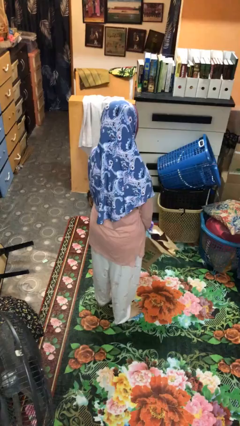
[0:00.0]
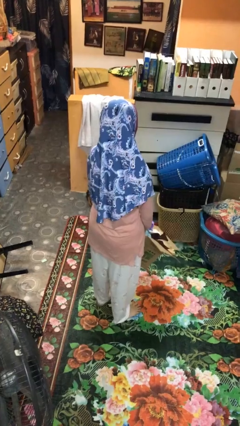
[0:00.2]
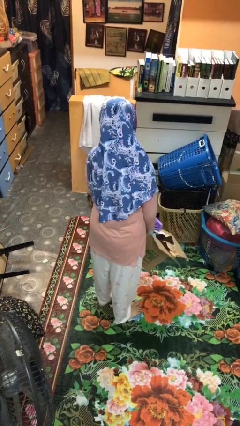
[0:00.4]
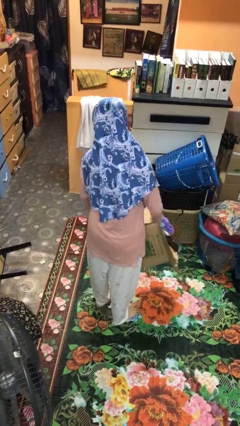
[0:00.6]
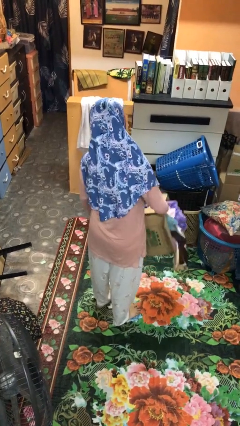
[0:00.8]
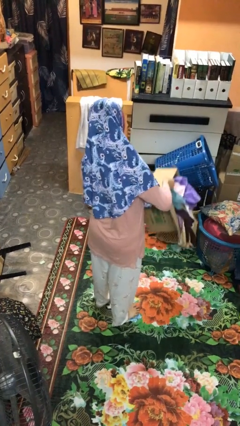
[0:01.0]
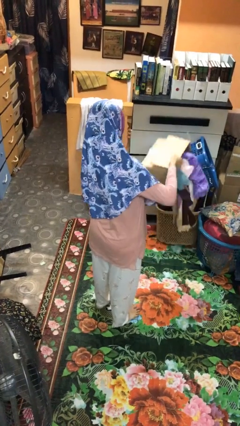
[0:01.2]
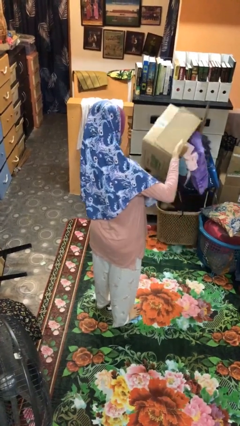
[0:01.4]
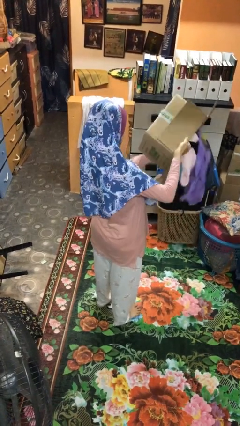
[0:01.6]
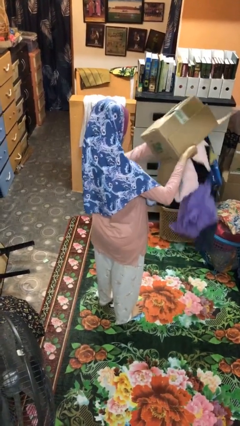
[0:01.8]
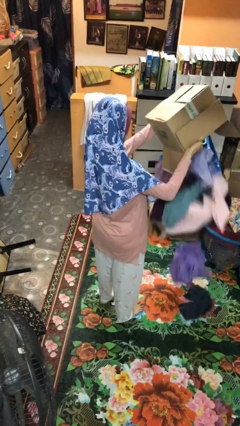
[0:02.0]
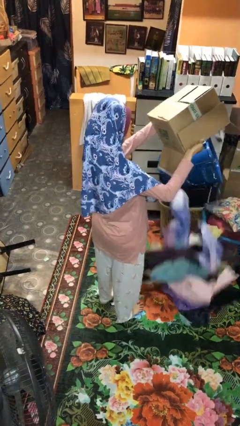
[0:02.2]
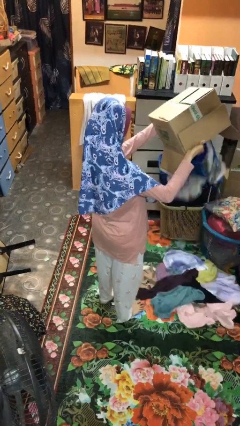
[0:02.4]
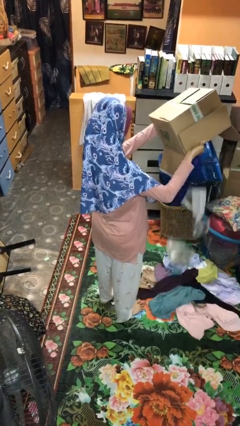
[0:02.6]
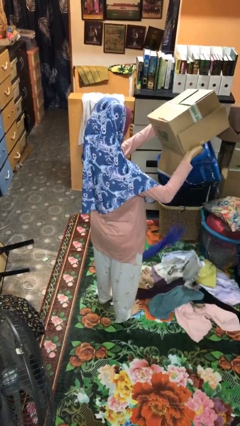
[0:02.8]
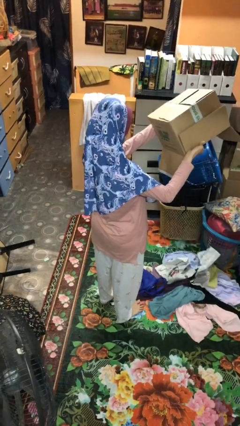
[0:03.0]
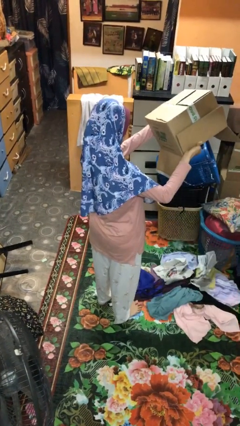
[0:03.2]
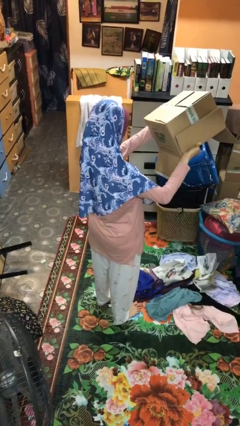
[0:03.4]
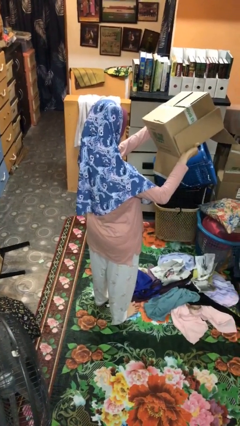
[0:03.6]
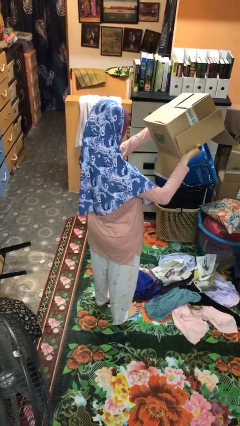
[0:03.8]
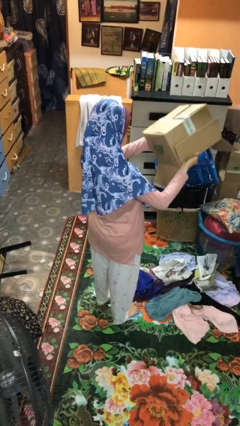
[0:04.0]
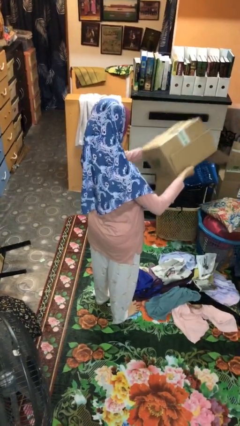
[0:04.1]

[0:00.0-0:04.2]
person unloads box onto floor

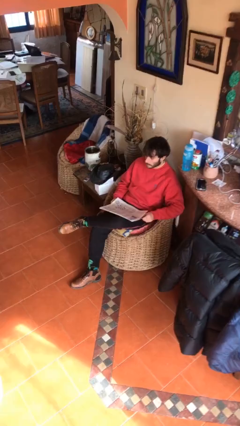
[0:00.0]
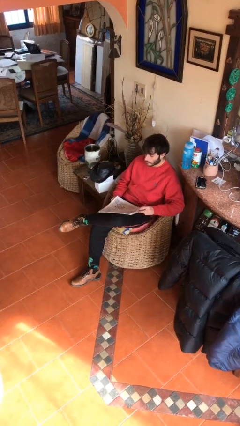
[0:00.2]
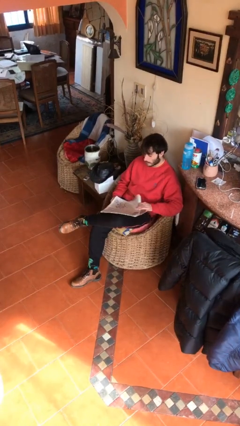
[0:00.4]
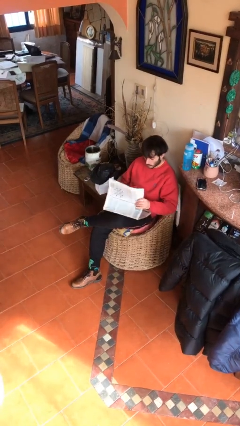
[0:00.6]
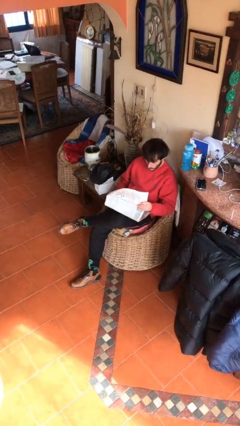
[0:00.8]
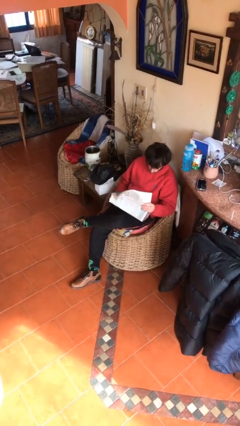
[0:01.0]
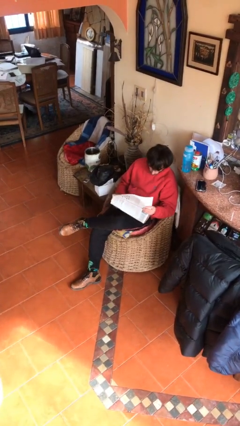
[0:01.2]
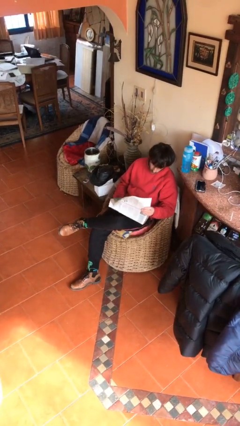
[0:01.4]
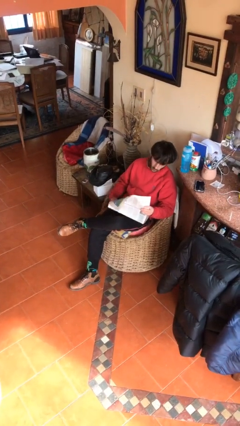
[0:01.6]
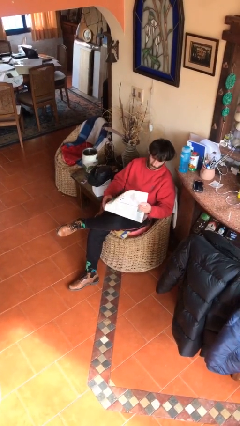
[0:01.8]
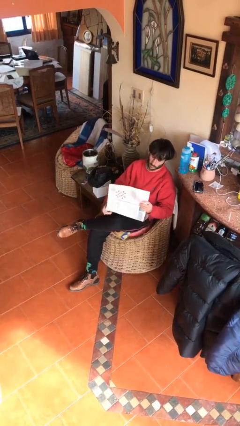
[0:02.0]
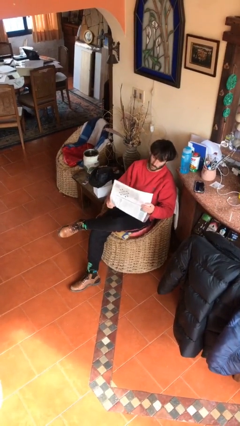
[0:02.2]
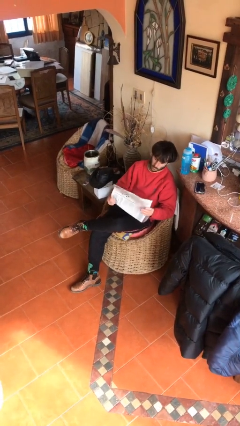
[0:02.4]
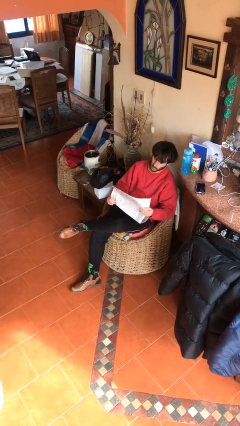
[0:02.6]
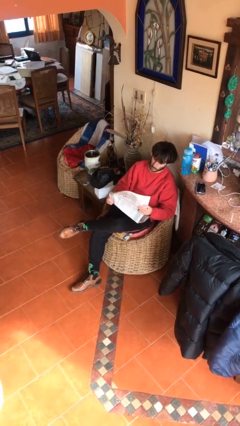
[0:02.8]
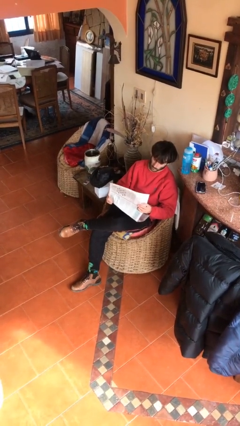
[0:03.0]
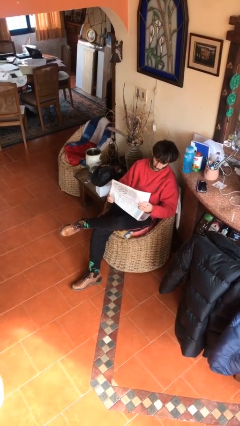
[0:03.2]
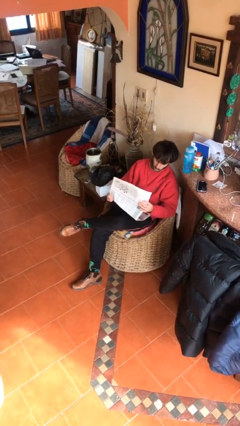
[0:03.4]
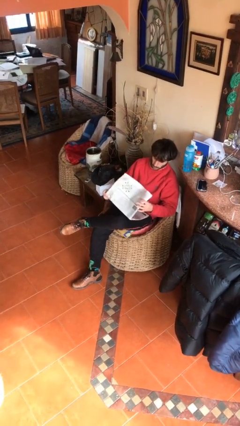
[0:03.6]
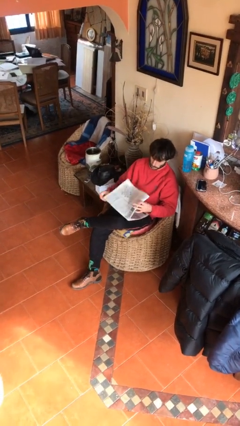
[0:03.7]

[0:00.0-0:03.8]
person reads newspaper

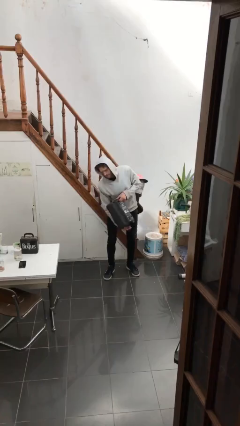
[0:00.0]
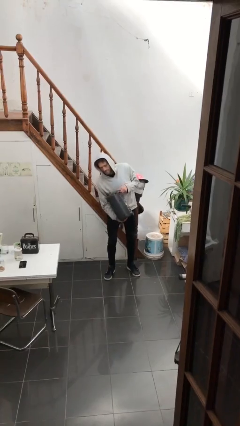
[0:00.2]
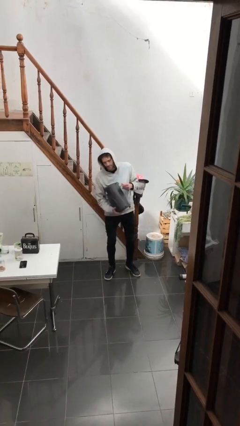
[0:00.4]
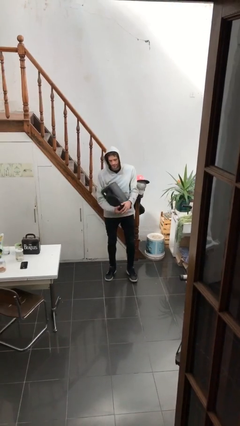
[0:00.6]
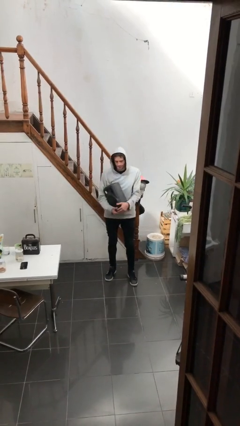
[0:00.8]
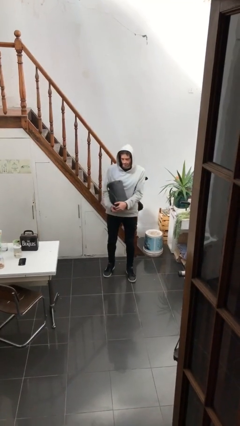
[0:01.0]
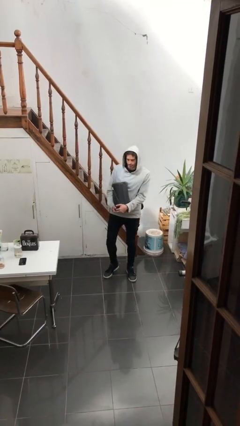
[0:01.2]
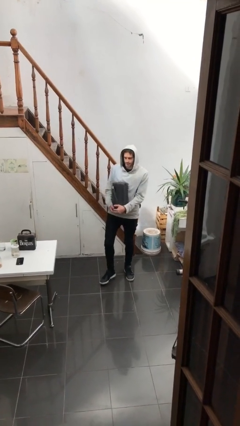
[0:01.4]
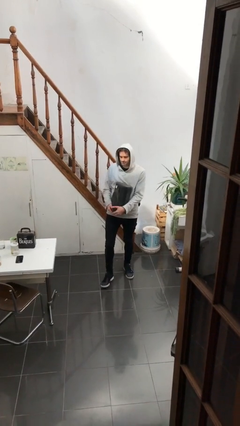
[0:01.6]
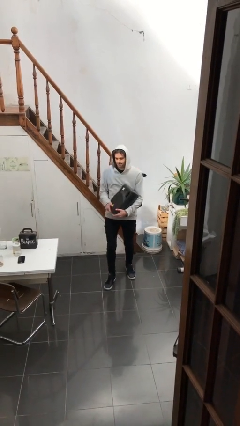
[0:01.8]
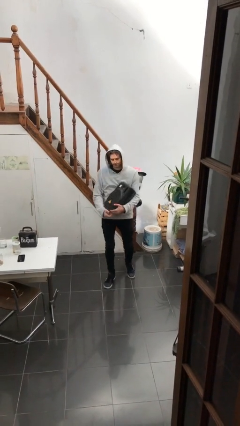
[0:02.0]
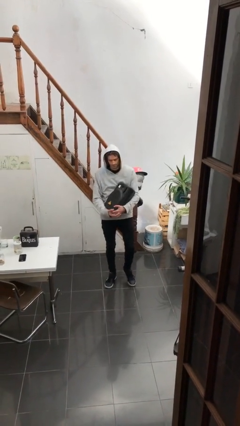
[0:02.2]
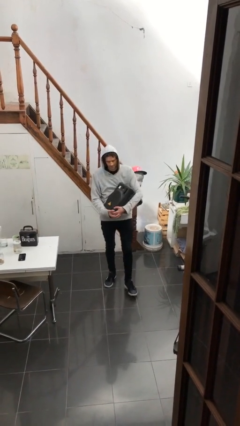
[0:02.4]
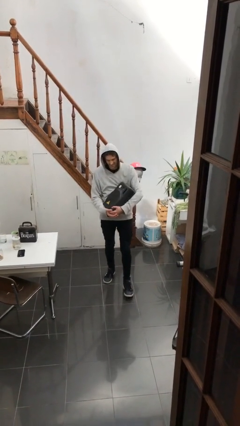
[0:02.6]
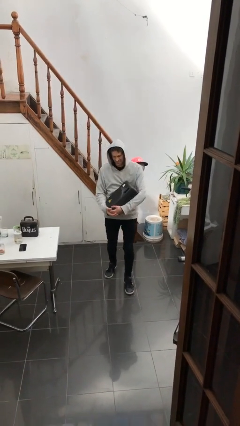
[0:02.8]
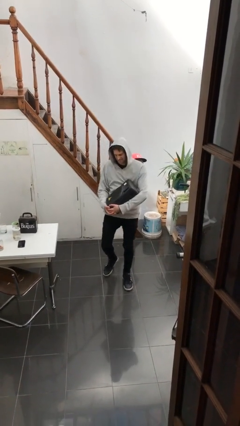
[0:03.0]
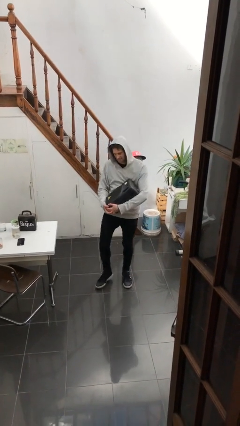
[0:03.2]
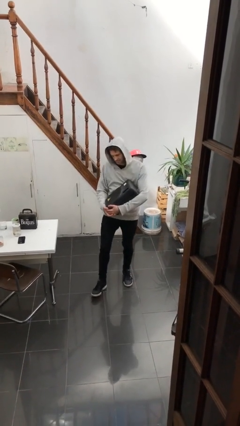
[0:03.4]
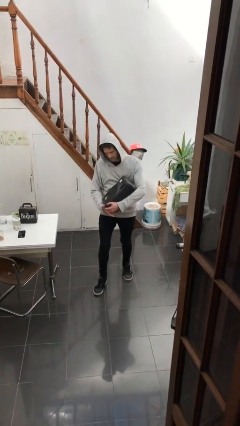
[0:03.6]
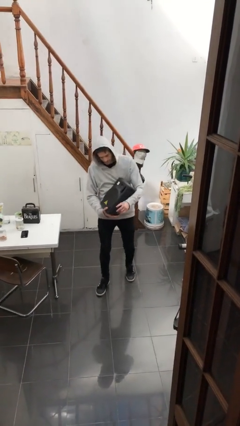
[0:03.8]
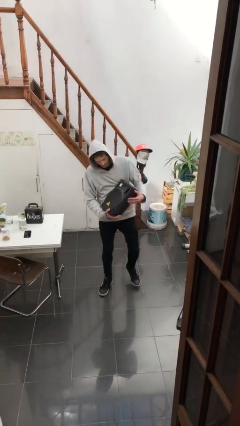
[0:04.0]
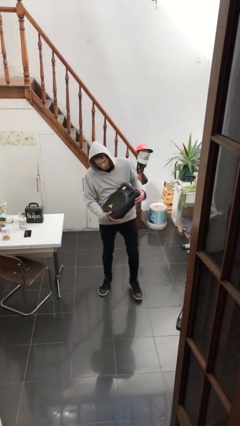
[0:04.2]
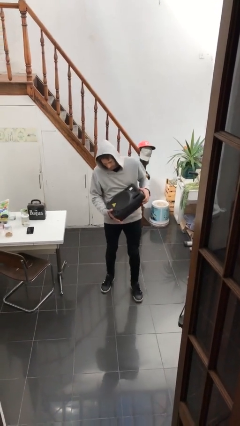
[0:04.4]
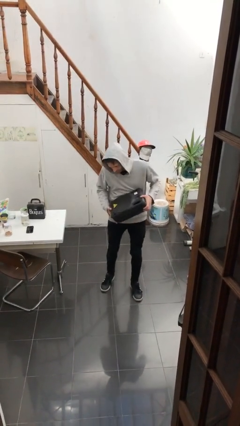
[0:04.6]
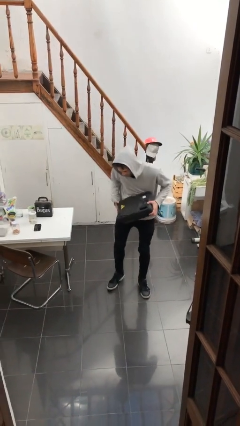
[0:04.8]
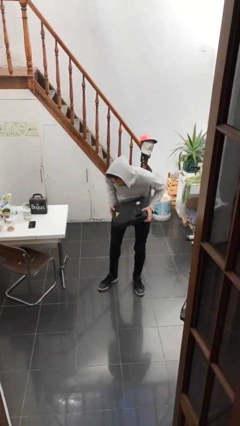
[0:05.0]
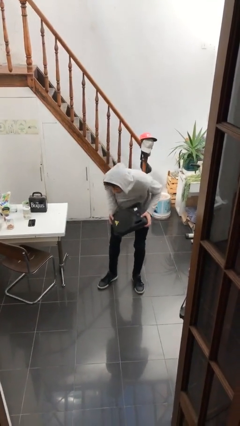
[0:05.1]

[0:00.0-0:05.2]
person carries heavy object

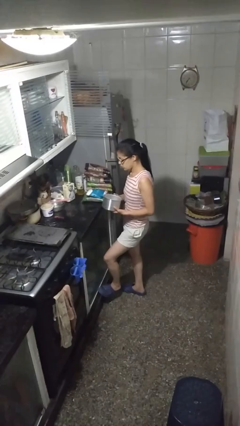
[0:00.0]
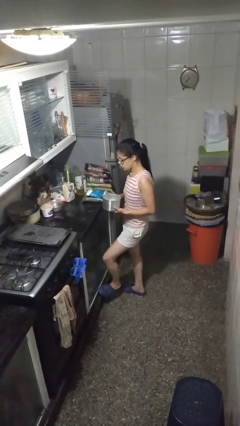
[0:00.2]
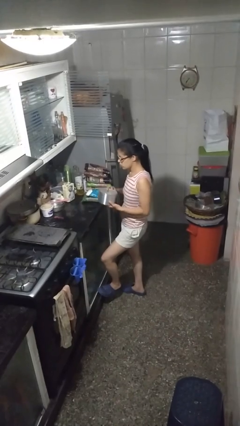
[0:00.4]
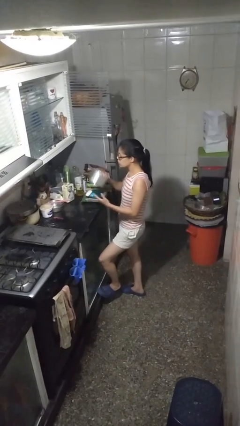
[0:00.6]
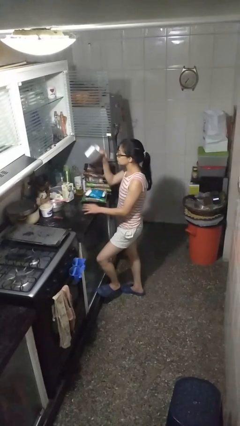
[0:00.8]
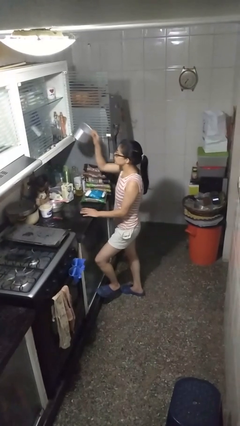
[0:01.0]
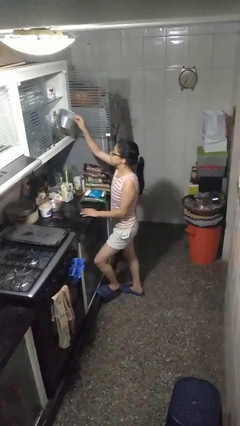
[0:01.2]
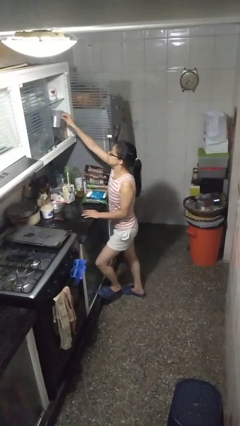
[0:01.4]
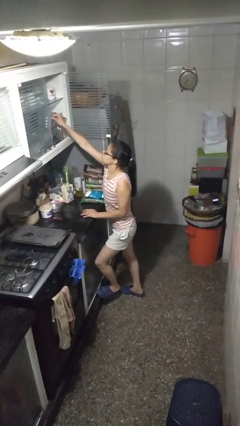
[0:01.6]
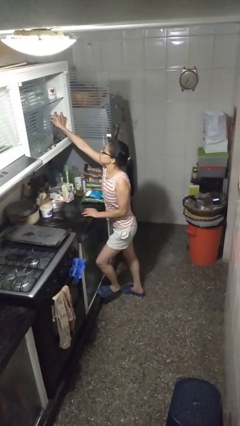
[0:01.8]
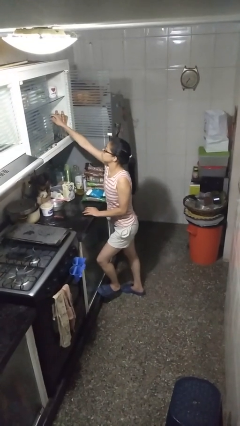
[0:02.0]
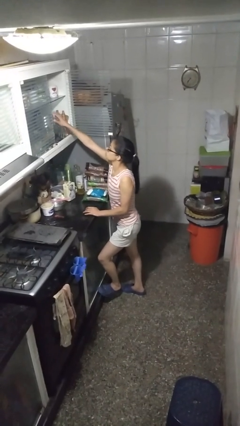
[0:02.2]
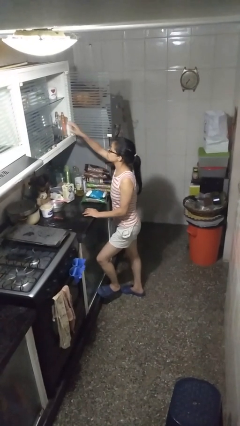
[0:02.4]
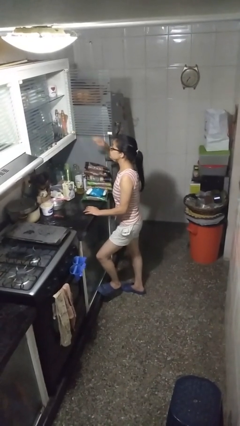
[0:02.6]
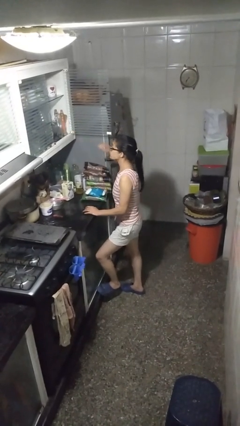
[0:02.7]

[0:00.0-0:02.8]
person puts down object into cabinet

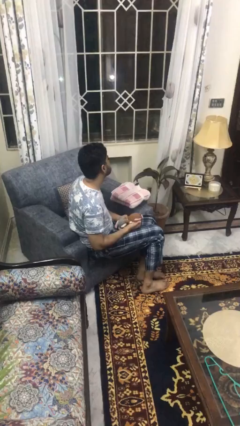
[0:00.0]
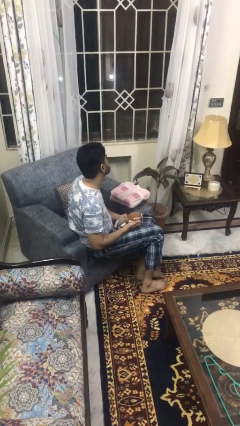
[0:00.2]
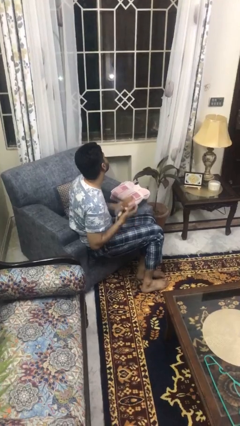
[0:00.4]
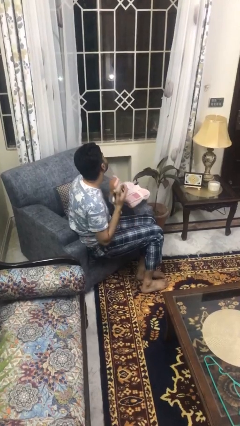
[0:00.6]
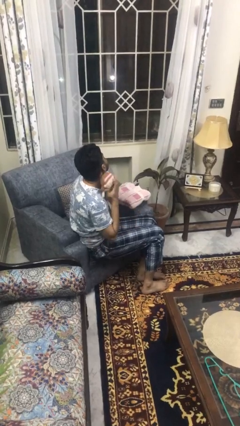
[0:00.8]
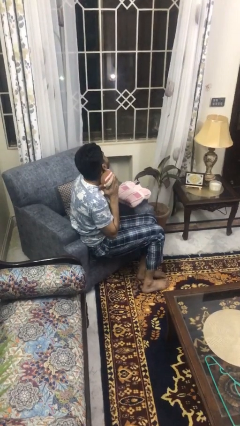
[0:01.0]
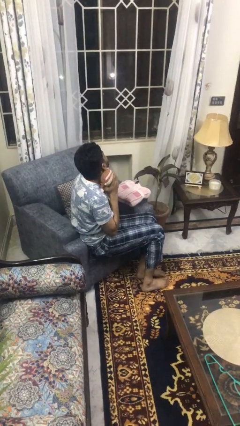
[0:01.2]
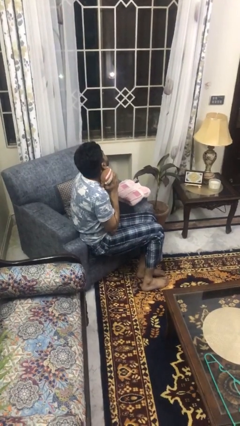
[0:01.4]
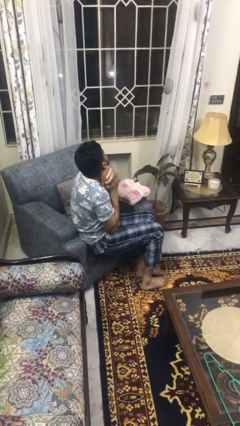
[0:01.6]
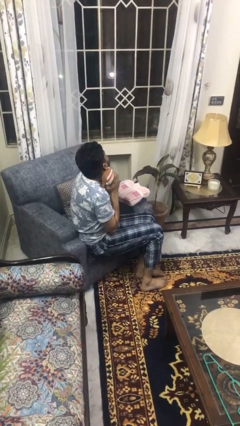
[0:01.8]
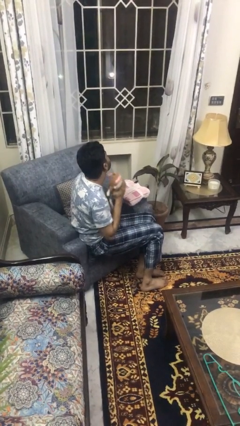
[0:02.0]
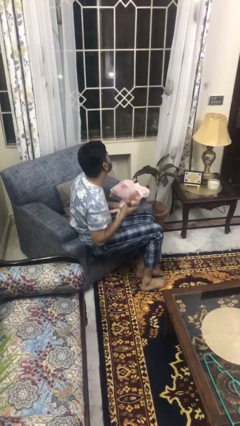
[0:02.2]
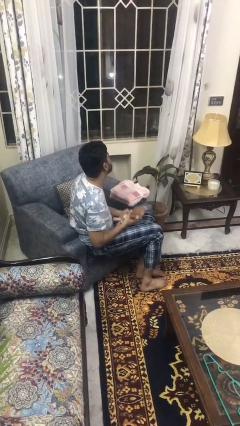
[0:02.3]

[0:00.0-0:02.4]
person hugs stuffed animal
